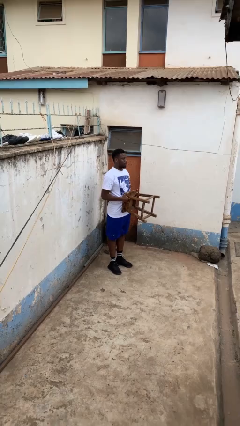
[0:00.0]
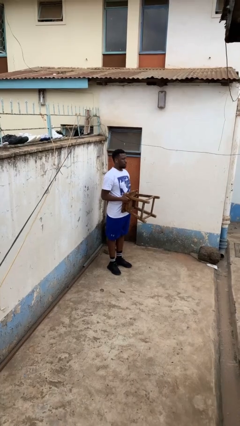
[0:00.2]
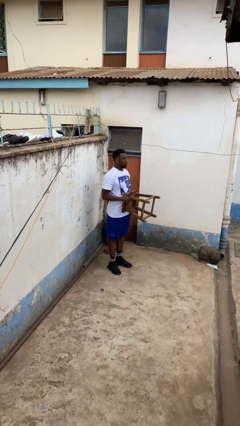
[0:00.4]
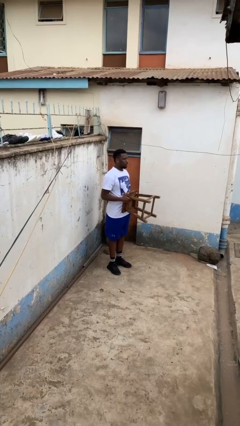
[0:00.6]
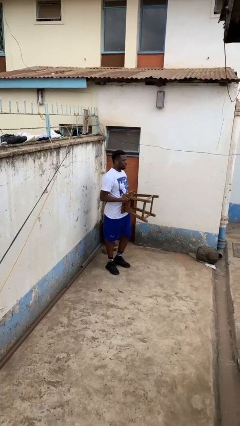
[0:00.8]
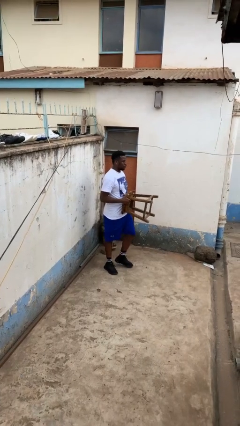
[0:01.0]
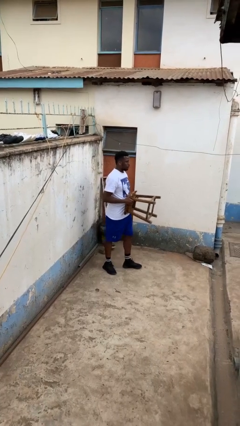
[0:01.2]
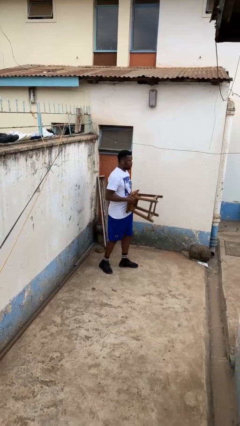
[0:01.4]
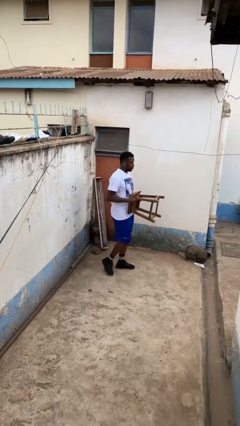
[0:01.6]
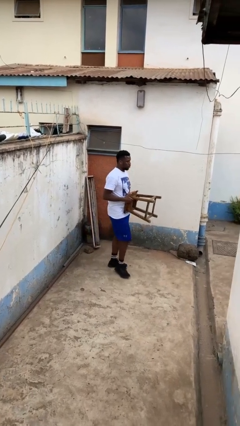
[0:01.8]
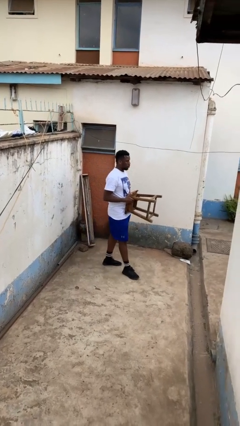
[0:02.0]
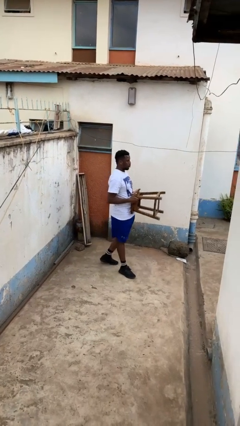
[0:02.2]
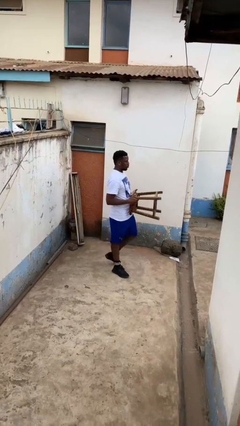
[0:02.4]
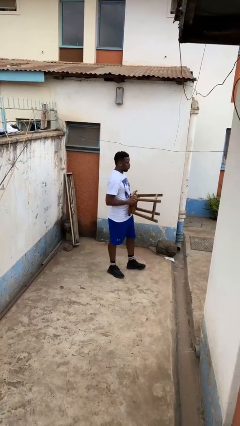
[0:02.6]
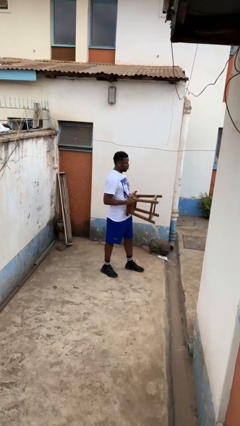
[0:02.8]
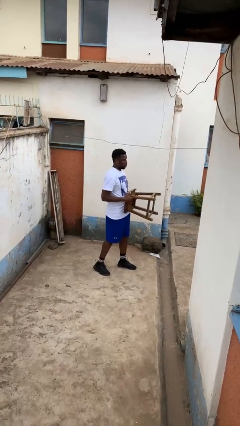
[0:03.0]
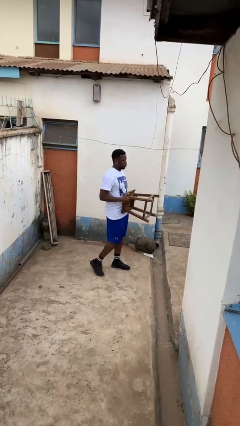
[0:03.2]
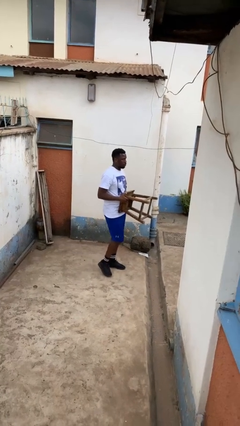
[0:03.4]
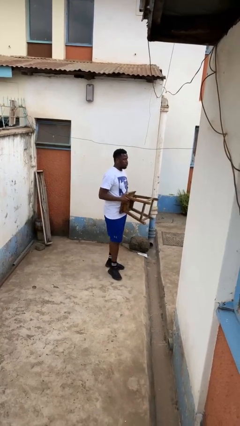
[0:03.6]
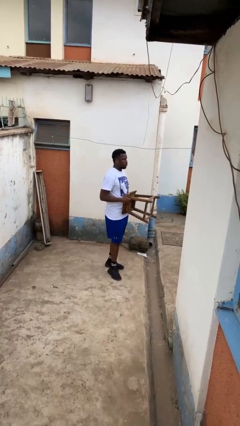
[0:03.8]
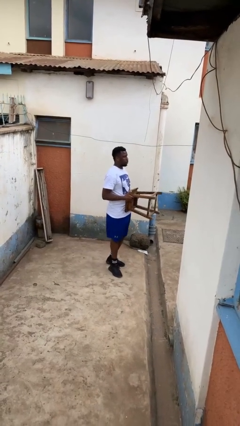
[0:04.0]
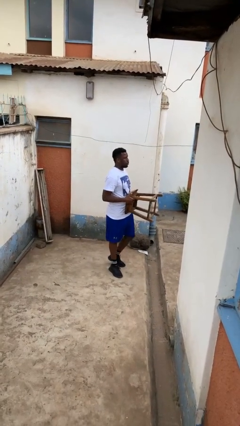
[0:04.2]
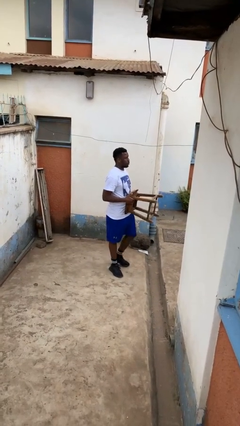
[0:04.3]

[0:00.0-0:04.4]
person carries furniture

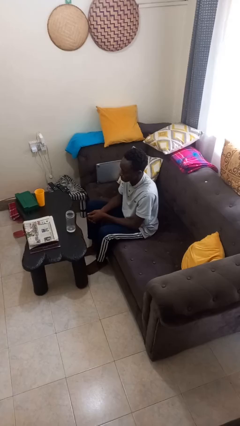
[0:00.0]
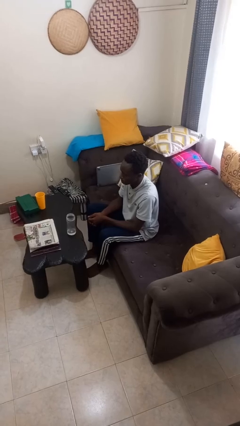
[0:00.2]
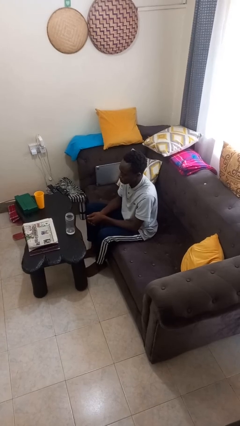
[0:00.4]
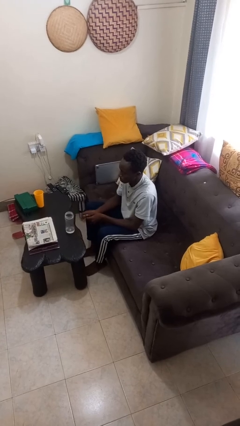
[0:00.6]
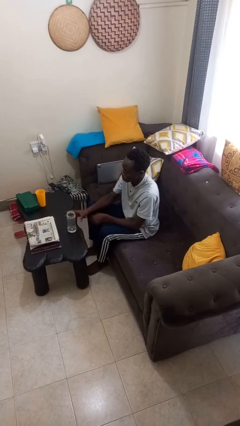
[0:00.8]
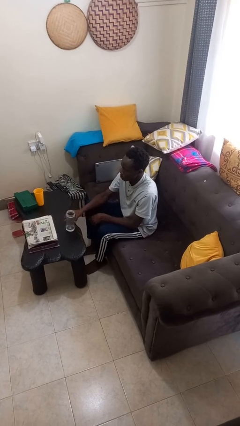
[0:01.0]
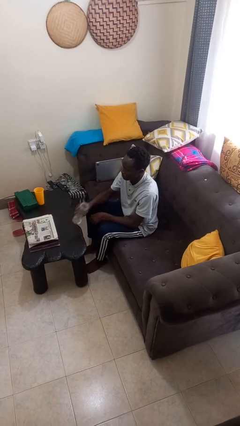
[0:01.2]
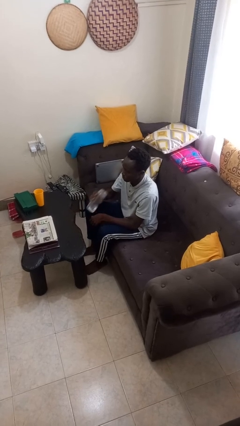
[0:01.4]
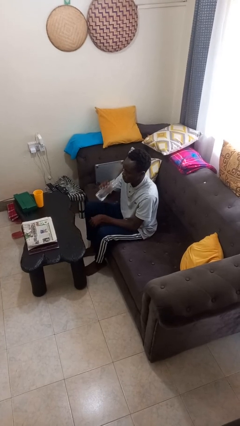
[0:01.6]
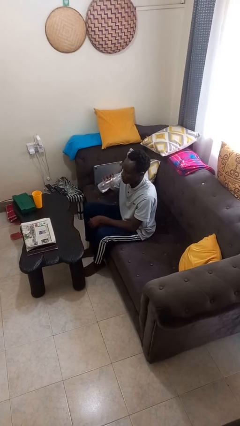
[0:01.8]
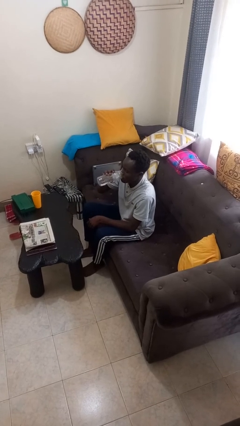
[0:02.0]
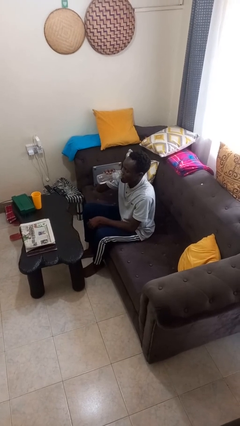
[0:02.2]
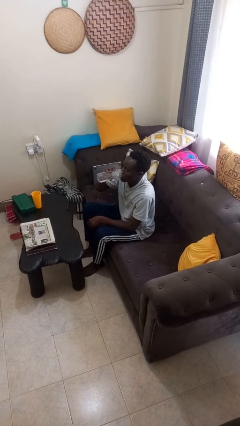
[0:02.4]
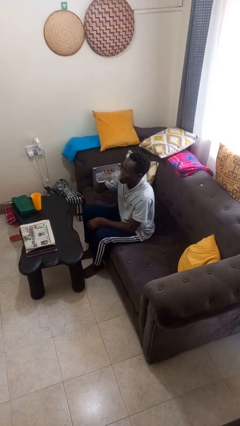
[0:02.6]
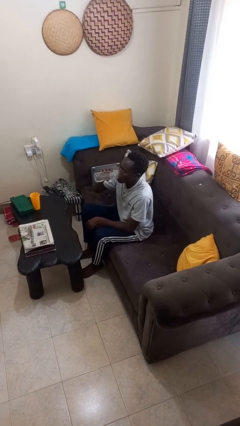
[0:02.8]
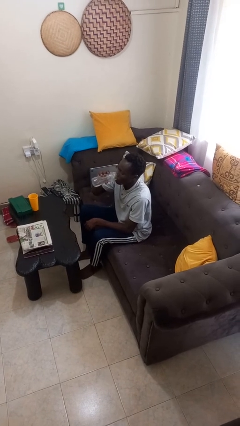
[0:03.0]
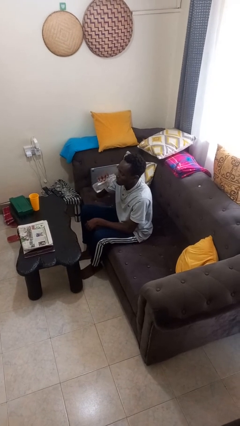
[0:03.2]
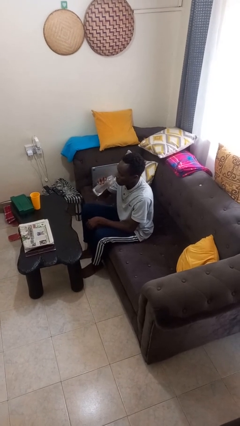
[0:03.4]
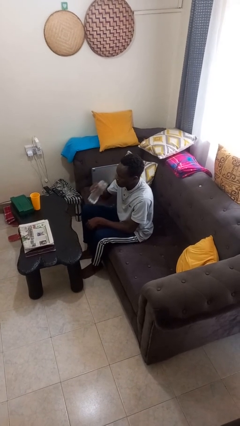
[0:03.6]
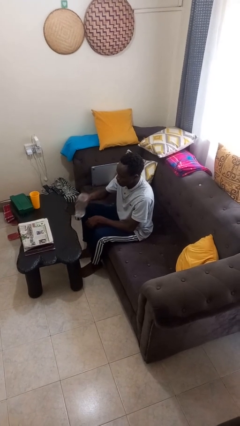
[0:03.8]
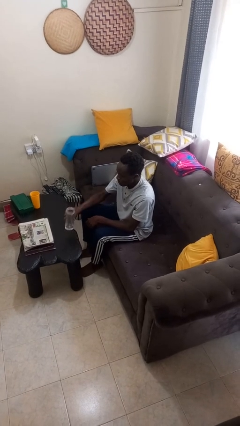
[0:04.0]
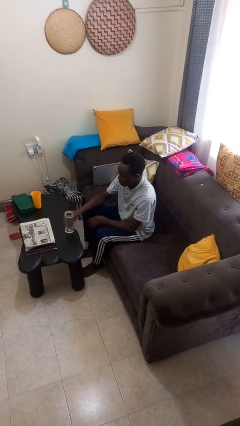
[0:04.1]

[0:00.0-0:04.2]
person drinks from bottle

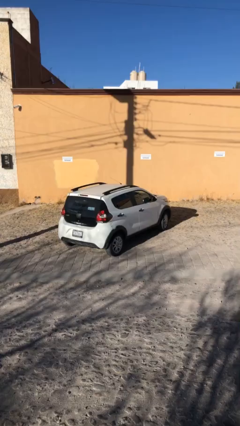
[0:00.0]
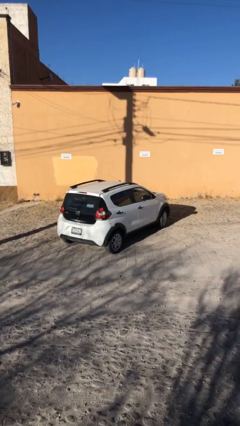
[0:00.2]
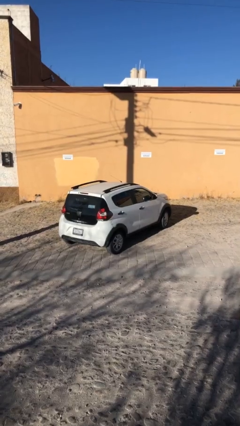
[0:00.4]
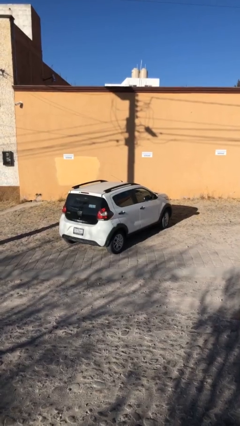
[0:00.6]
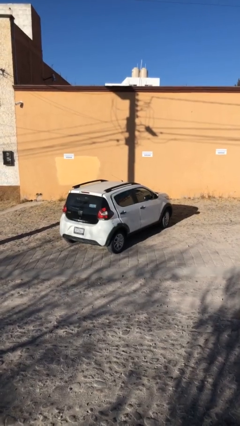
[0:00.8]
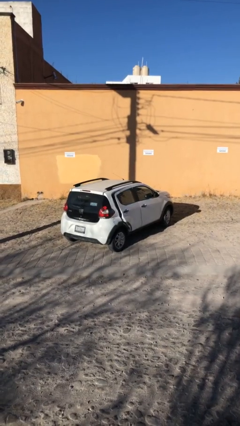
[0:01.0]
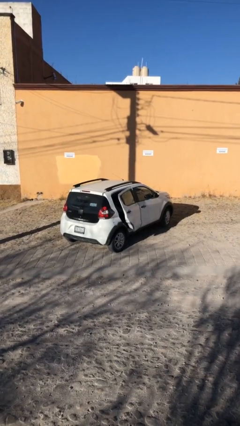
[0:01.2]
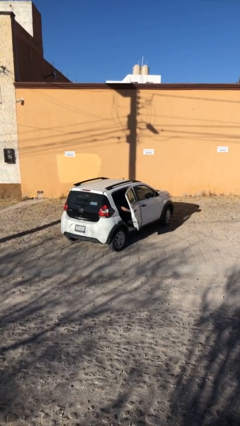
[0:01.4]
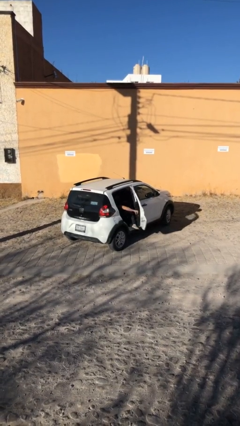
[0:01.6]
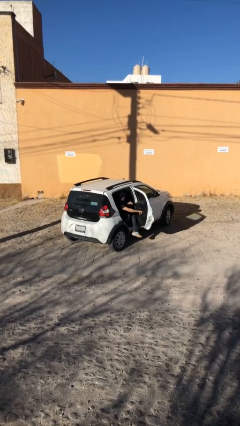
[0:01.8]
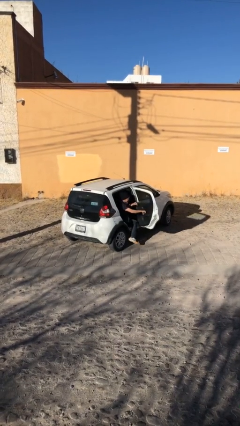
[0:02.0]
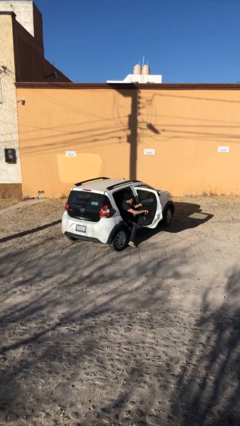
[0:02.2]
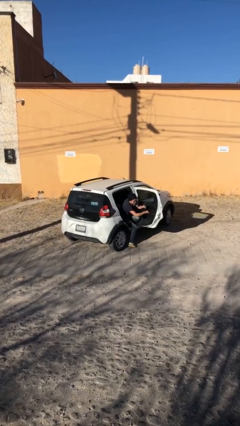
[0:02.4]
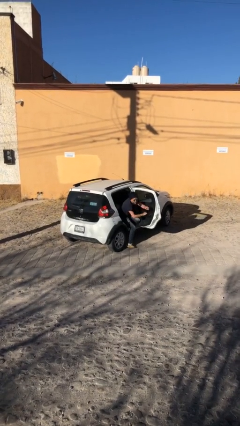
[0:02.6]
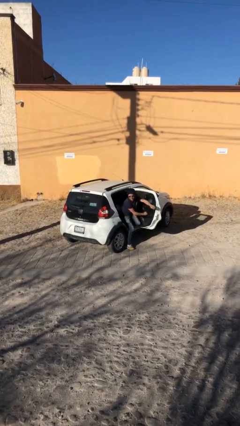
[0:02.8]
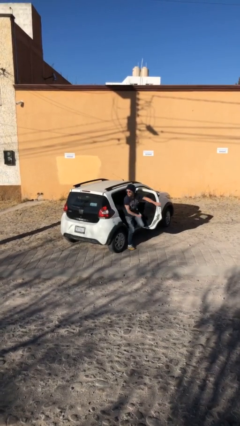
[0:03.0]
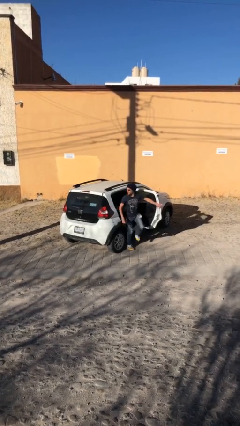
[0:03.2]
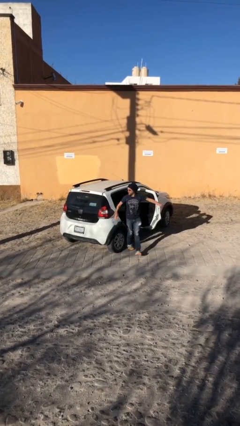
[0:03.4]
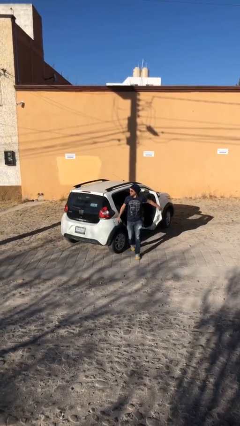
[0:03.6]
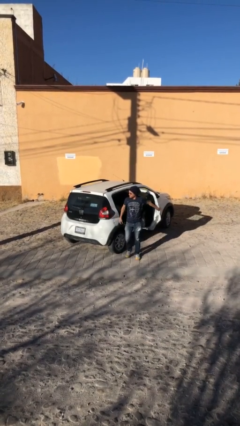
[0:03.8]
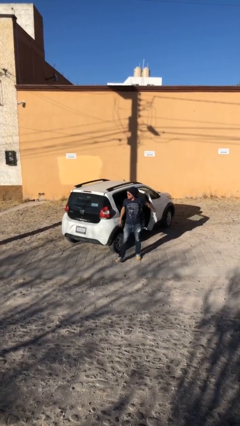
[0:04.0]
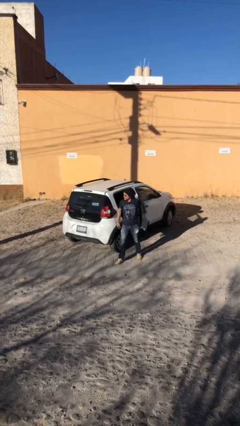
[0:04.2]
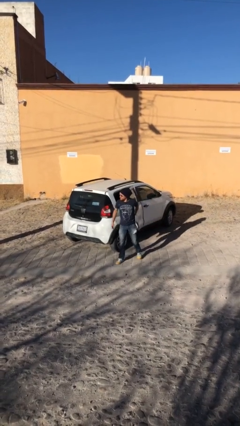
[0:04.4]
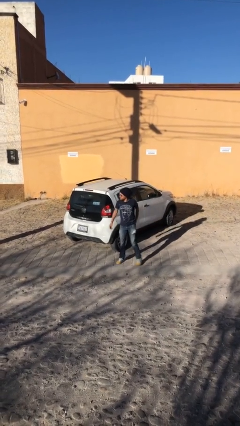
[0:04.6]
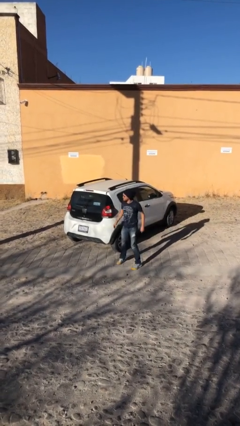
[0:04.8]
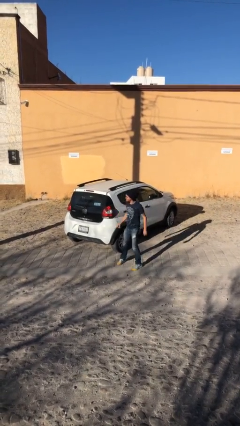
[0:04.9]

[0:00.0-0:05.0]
car drops off person

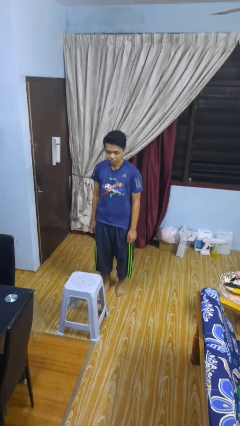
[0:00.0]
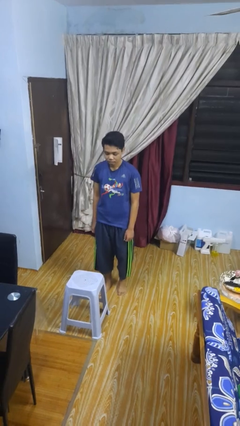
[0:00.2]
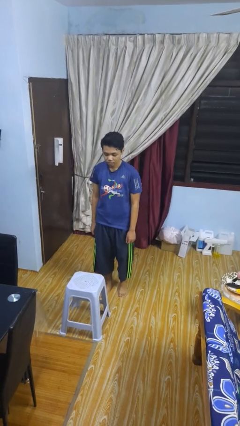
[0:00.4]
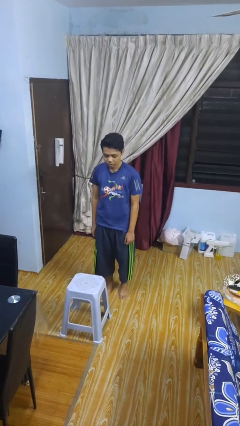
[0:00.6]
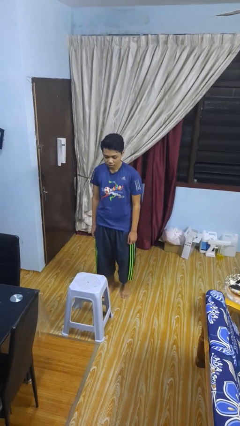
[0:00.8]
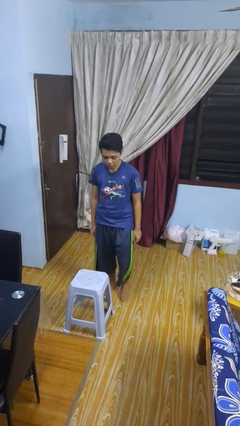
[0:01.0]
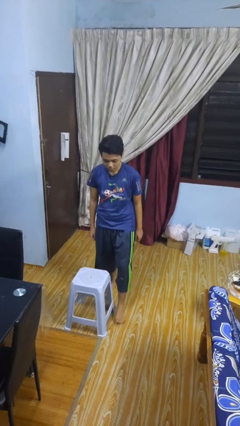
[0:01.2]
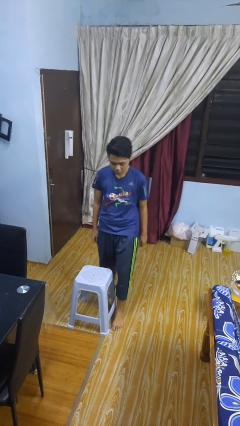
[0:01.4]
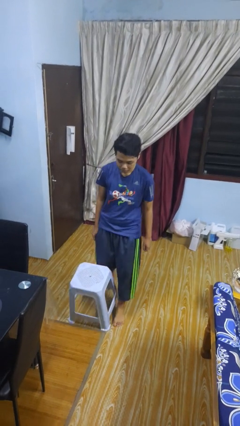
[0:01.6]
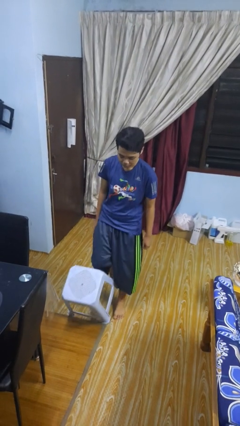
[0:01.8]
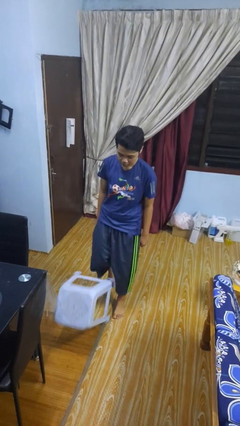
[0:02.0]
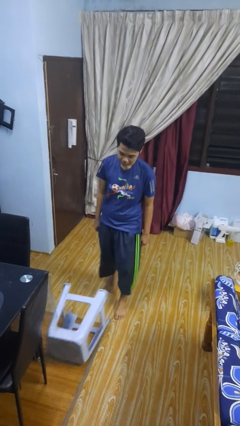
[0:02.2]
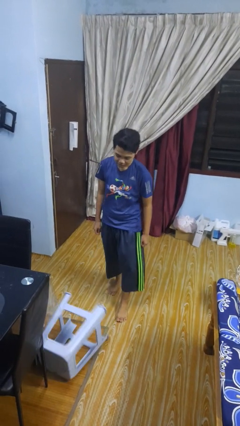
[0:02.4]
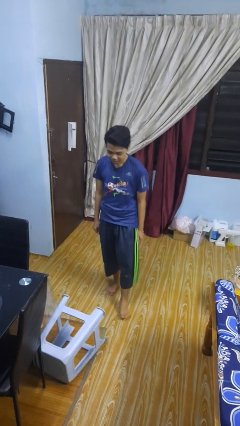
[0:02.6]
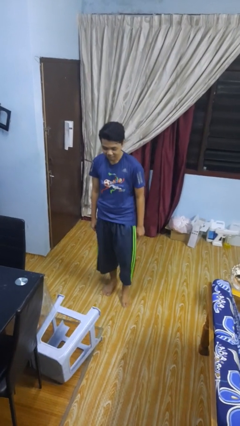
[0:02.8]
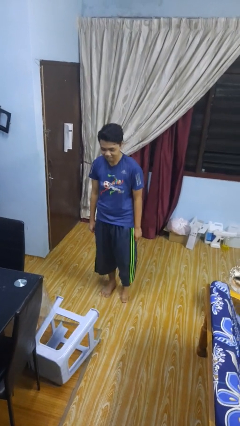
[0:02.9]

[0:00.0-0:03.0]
person knocks over furniture

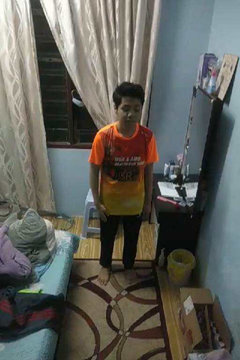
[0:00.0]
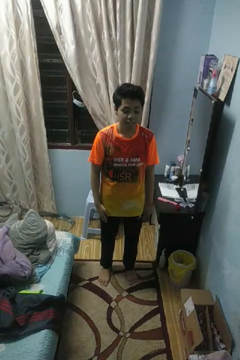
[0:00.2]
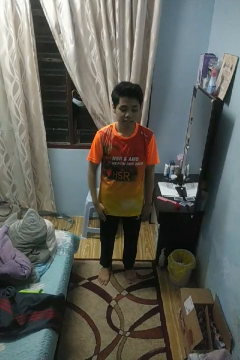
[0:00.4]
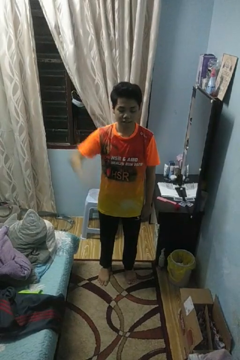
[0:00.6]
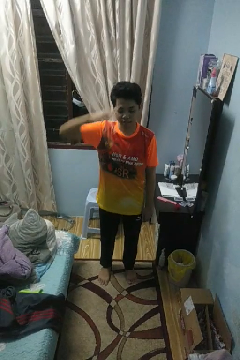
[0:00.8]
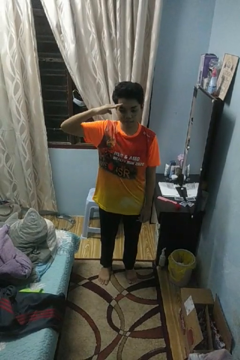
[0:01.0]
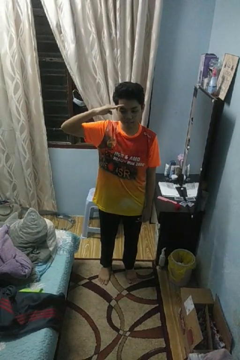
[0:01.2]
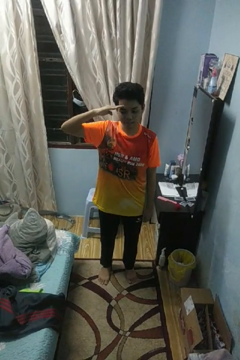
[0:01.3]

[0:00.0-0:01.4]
person salutes
